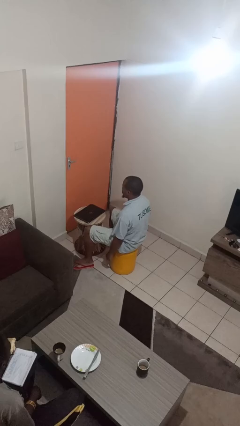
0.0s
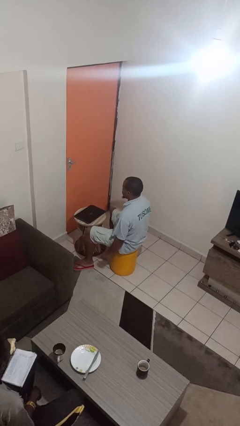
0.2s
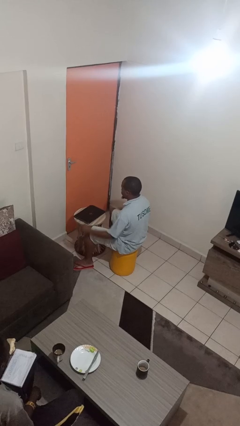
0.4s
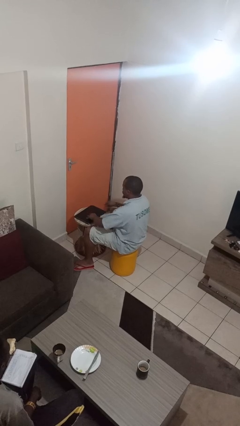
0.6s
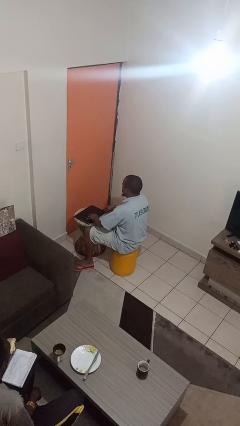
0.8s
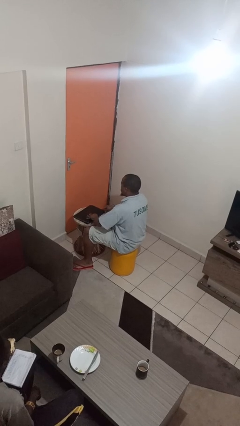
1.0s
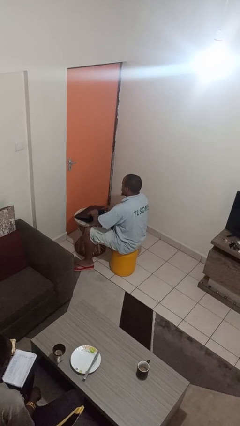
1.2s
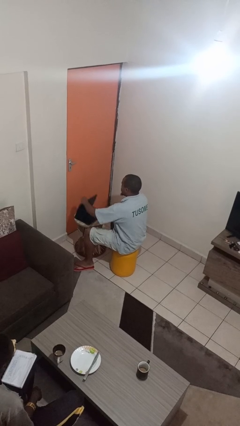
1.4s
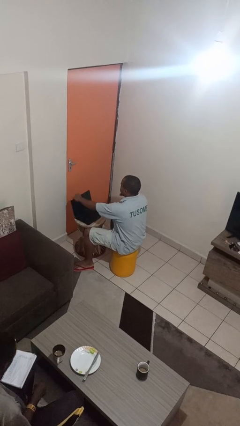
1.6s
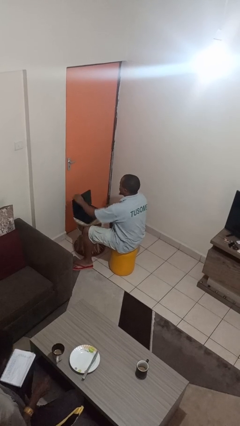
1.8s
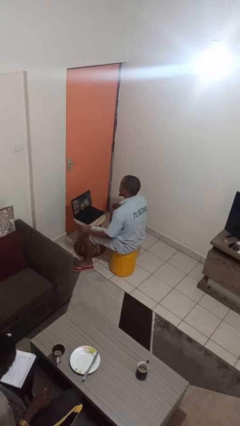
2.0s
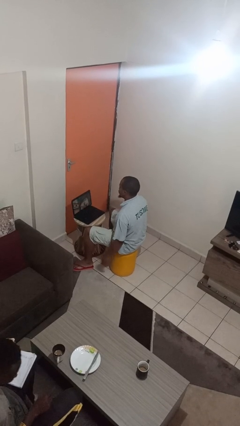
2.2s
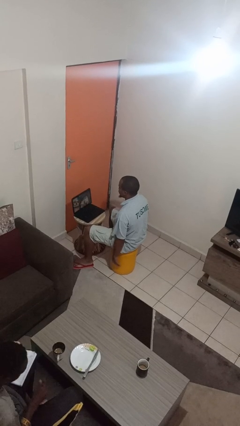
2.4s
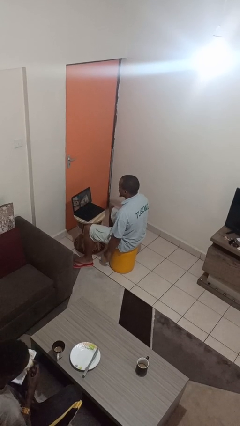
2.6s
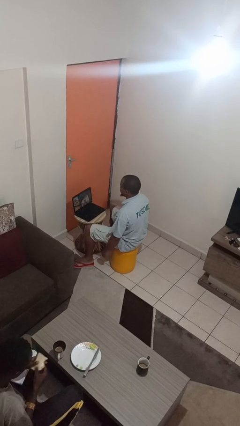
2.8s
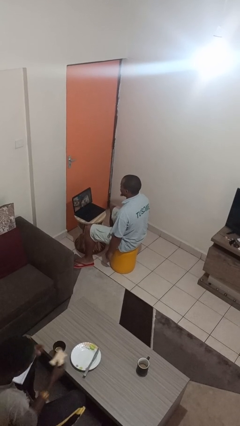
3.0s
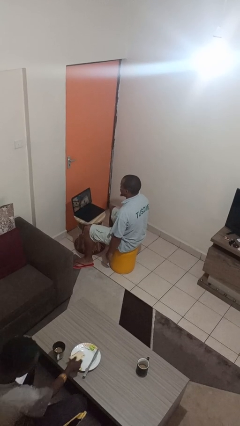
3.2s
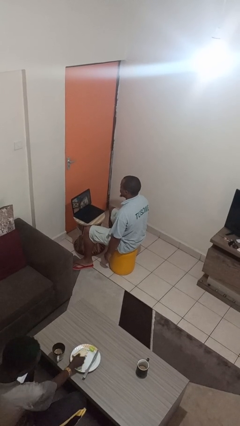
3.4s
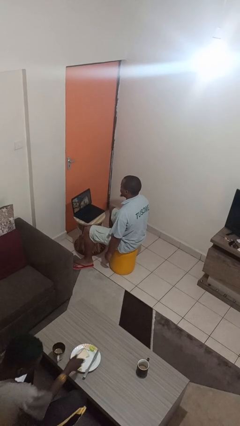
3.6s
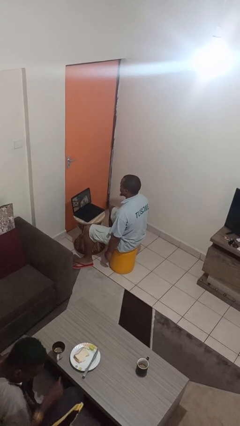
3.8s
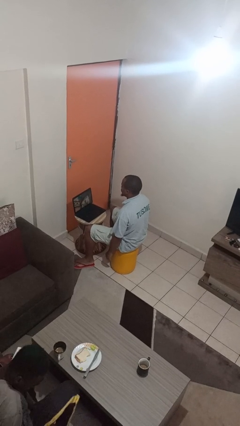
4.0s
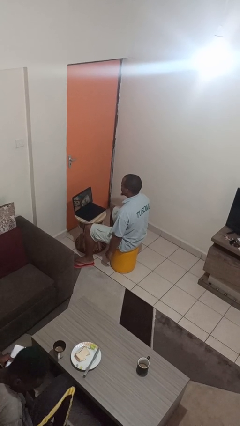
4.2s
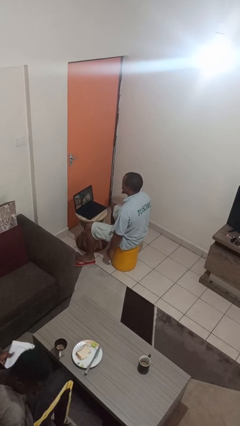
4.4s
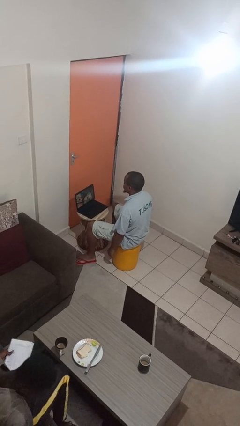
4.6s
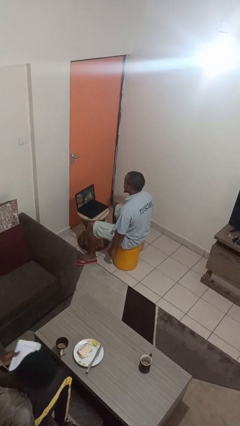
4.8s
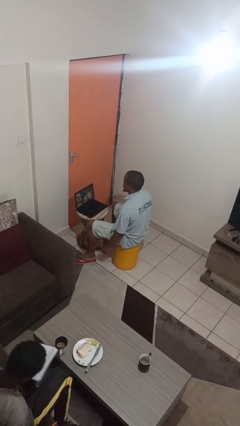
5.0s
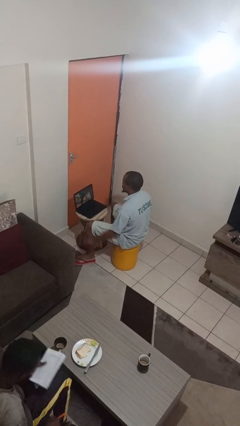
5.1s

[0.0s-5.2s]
person opens laptop

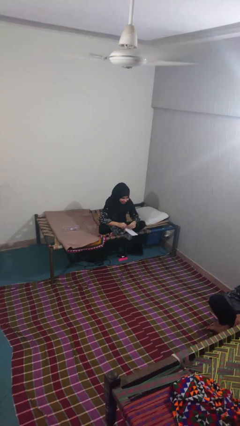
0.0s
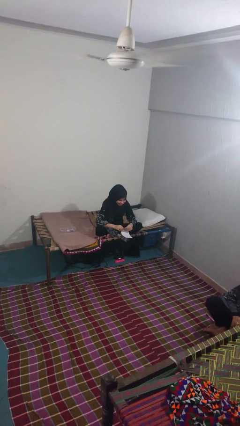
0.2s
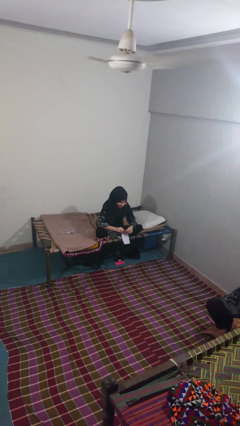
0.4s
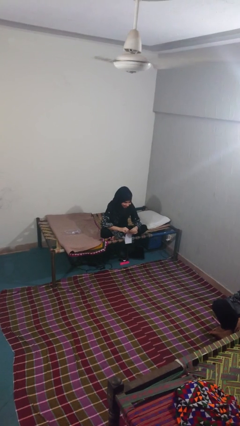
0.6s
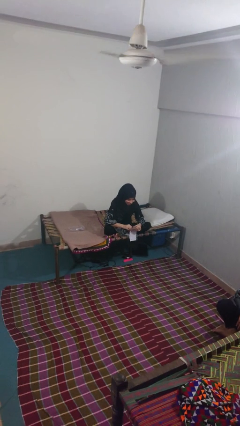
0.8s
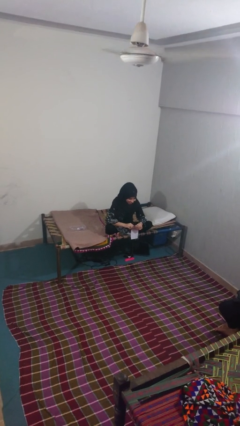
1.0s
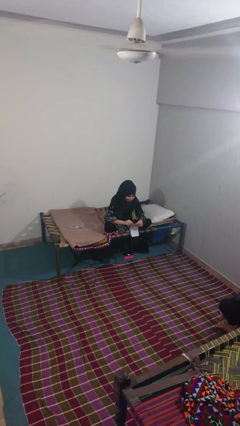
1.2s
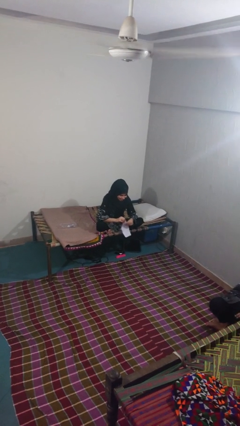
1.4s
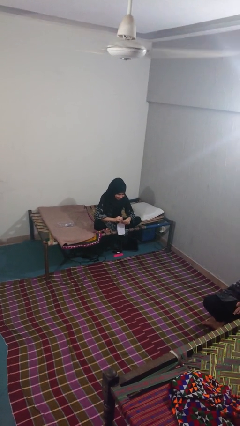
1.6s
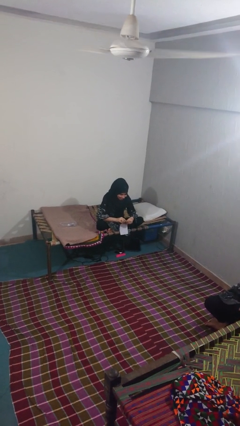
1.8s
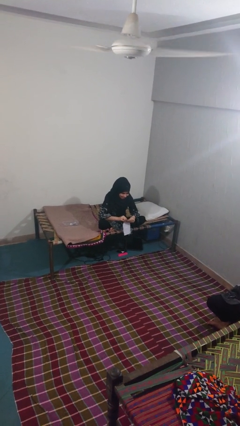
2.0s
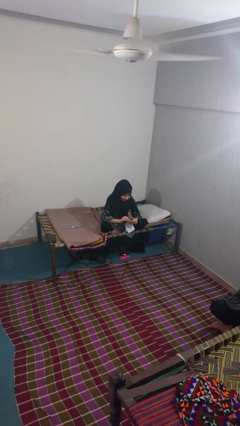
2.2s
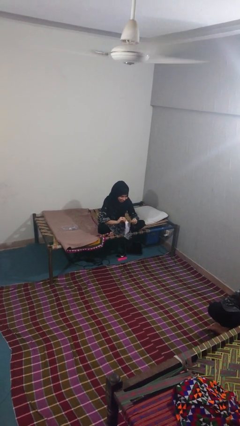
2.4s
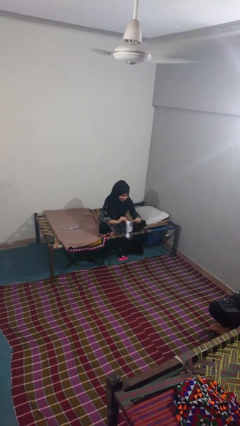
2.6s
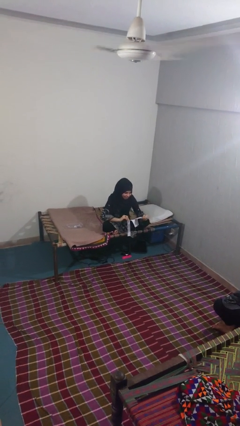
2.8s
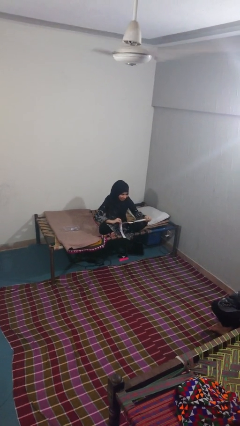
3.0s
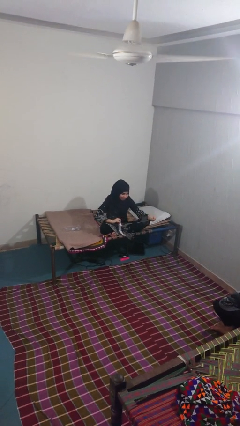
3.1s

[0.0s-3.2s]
person tears paper

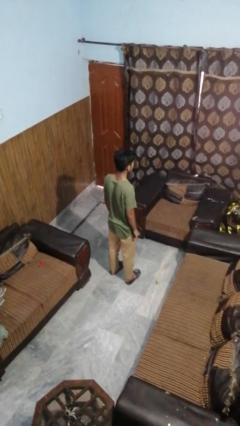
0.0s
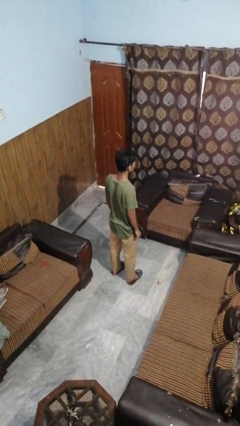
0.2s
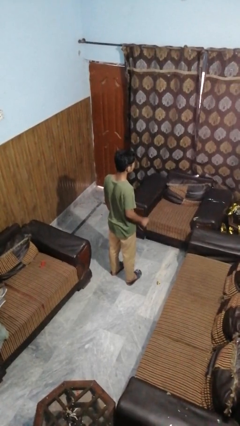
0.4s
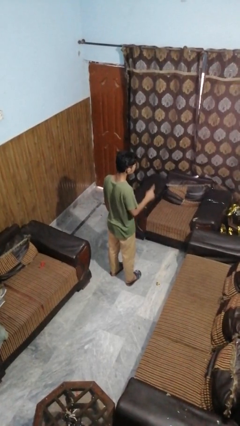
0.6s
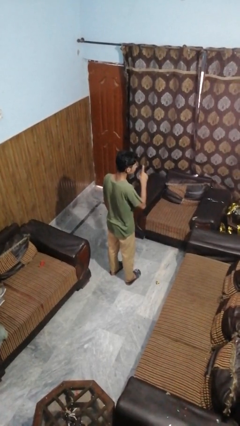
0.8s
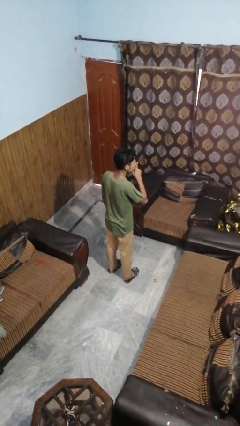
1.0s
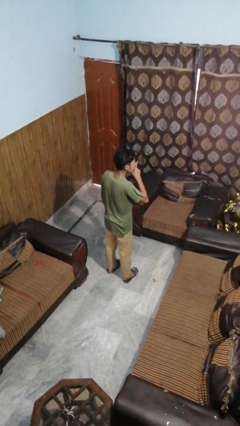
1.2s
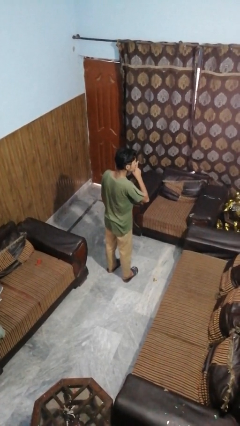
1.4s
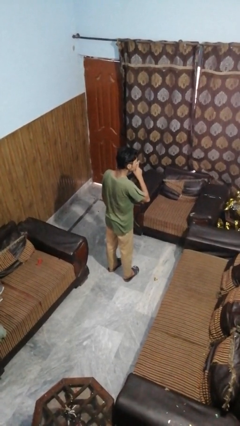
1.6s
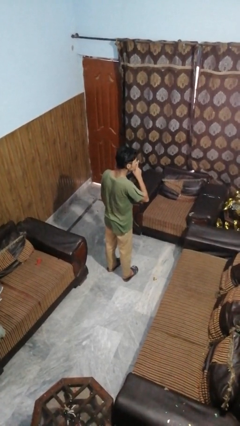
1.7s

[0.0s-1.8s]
person gestures be quiet

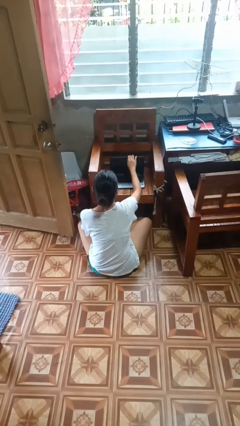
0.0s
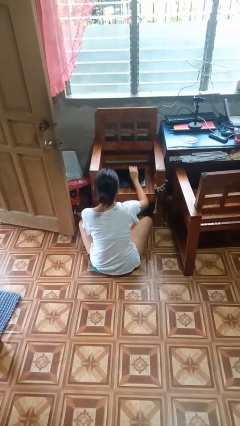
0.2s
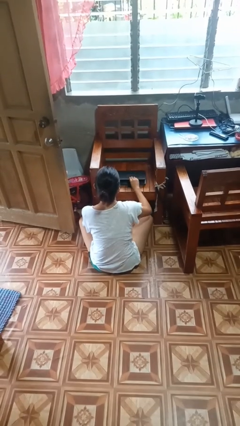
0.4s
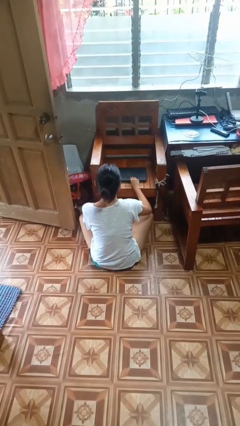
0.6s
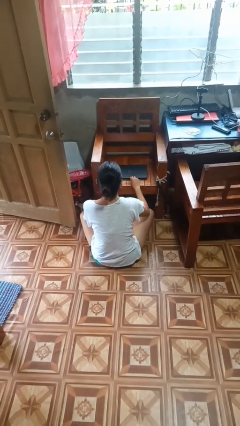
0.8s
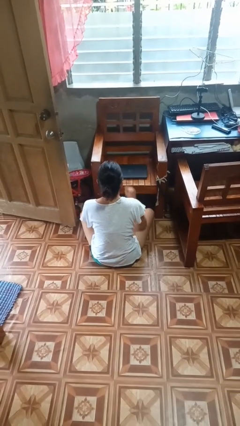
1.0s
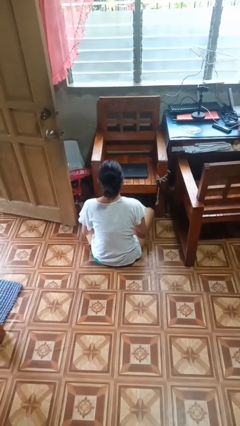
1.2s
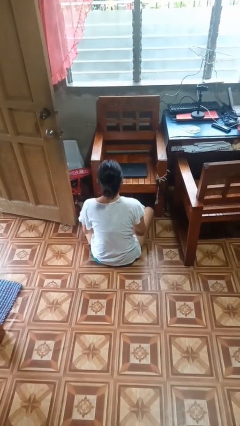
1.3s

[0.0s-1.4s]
person closes laptop

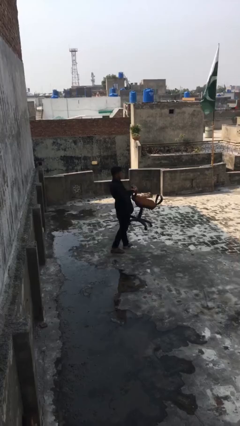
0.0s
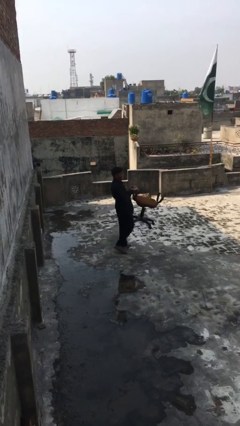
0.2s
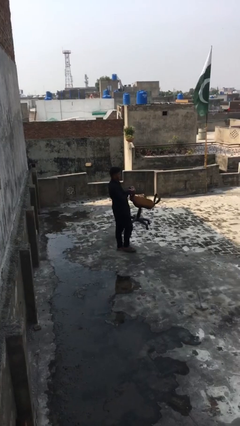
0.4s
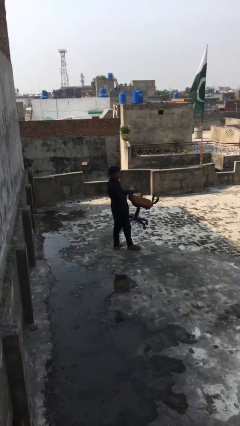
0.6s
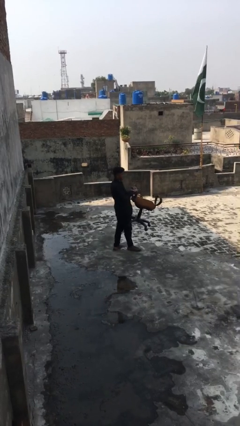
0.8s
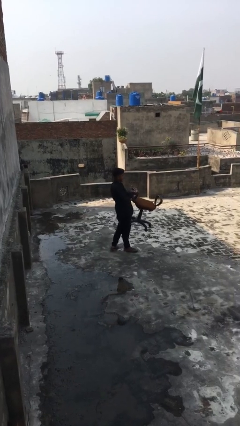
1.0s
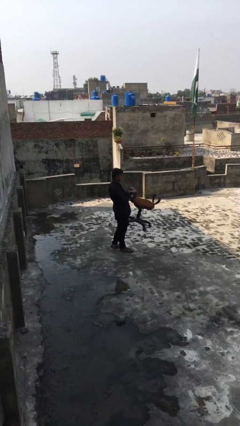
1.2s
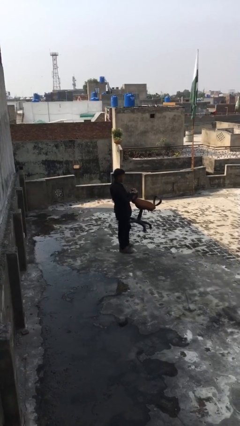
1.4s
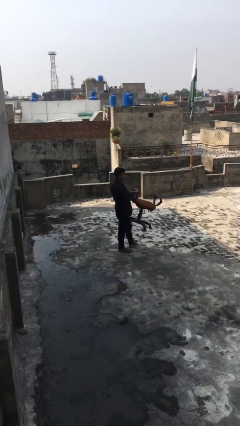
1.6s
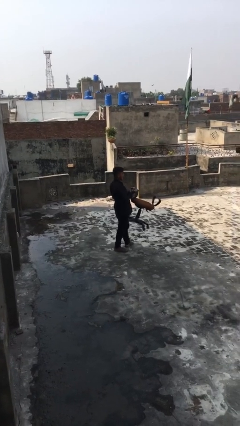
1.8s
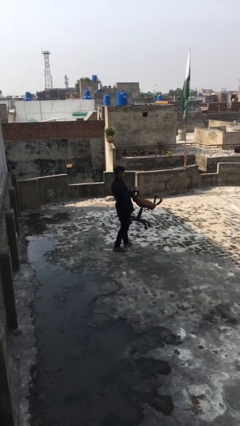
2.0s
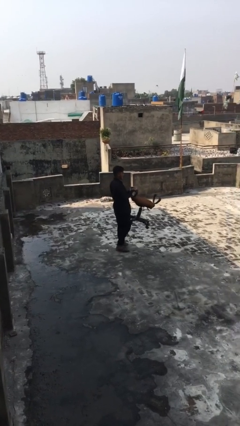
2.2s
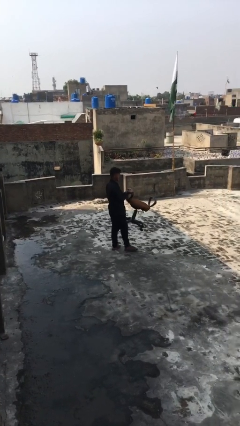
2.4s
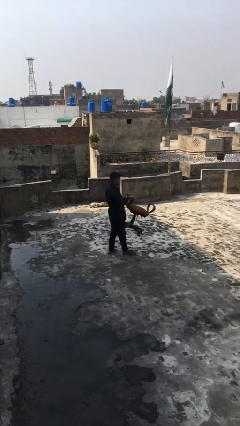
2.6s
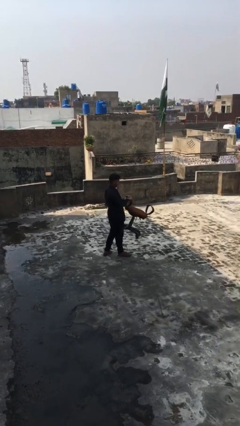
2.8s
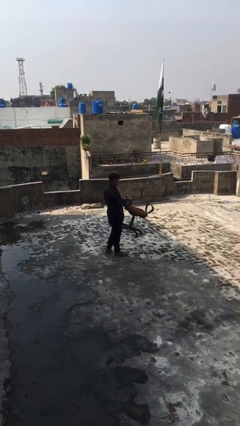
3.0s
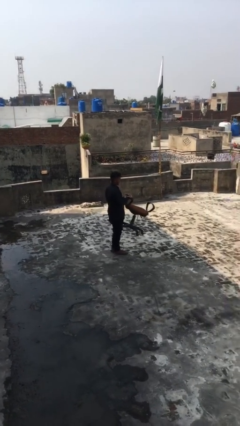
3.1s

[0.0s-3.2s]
person carries heavy object

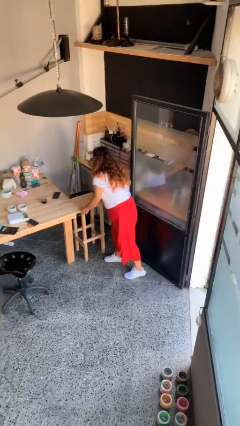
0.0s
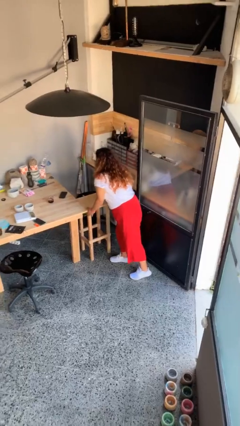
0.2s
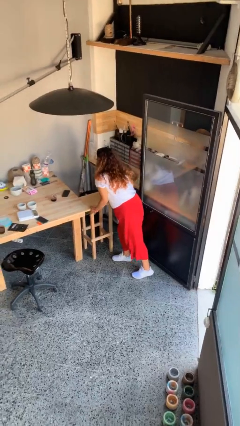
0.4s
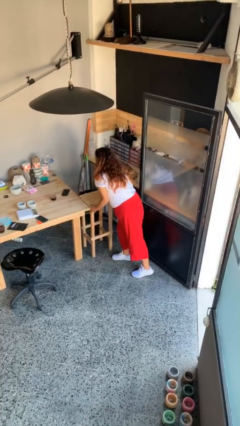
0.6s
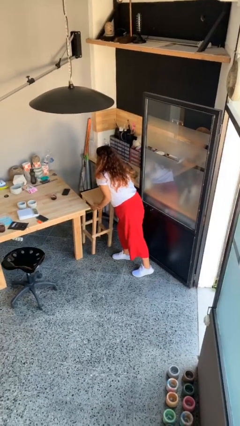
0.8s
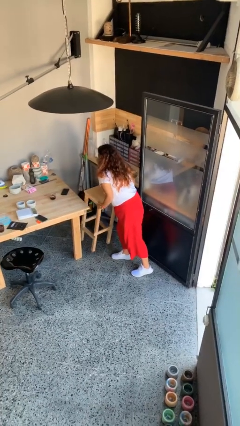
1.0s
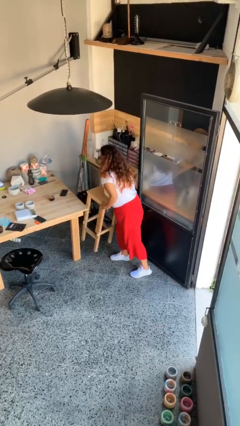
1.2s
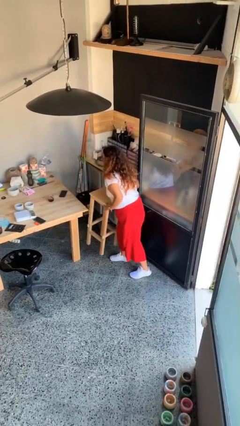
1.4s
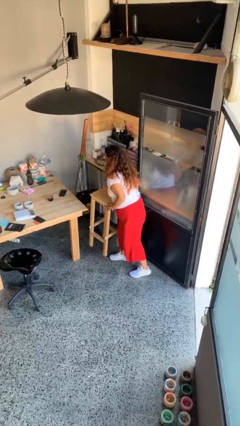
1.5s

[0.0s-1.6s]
person picks up object from floor

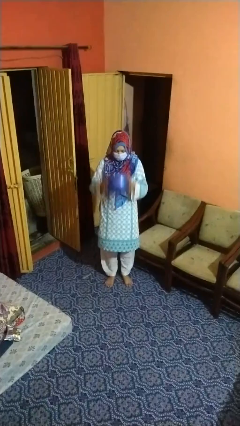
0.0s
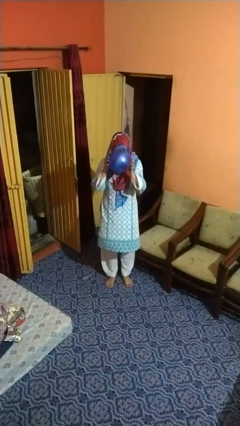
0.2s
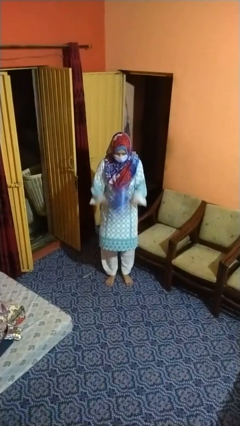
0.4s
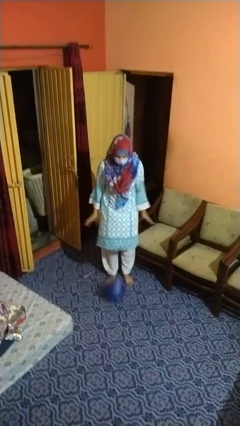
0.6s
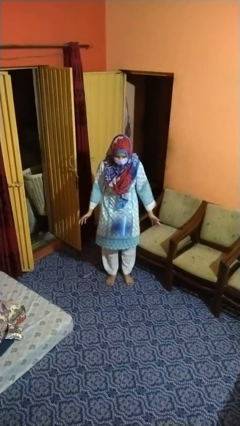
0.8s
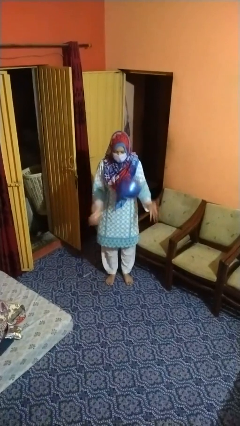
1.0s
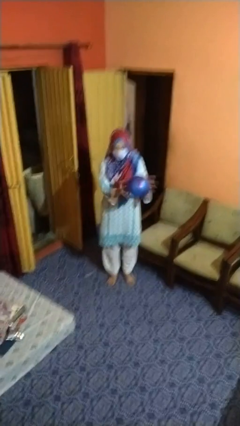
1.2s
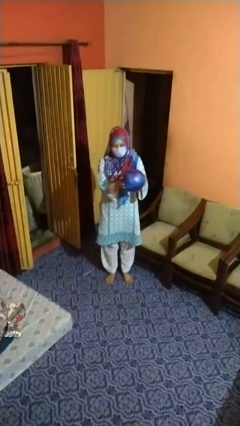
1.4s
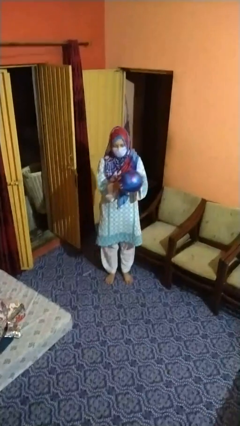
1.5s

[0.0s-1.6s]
person bounces ball on floor
